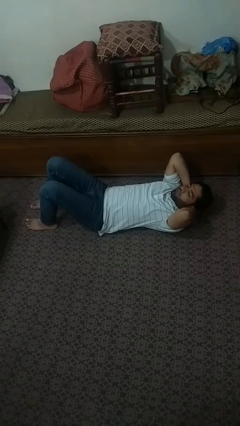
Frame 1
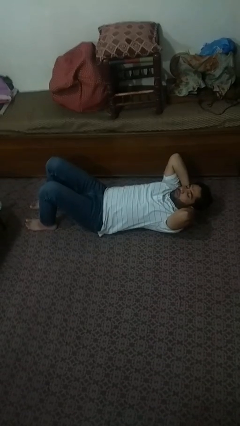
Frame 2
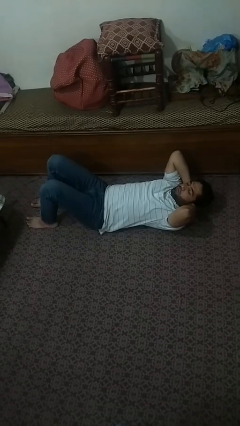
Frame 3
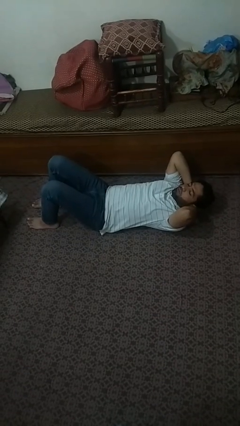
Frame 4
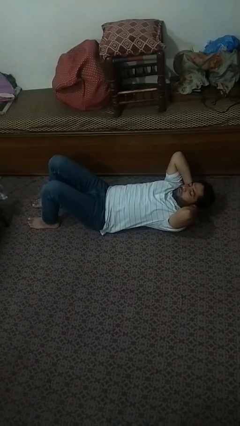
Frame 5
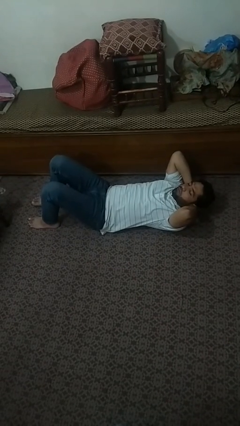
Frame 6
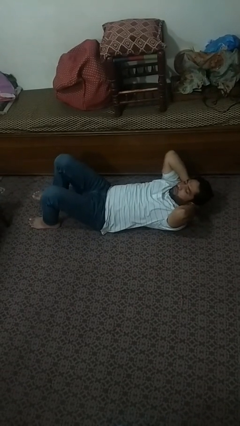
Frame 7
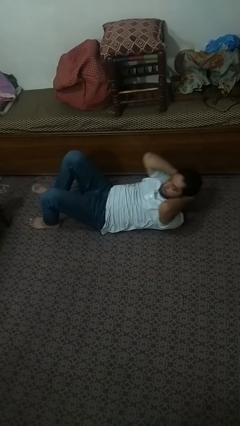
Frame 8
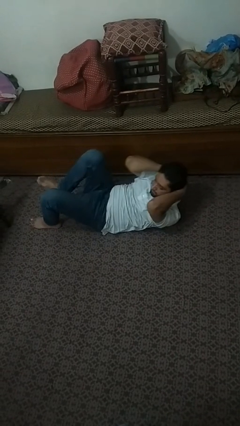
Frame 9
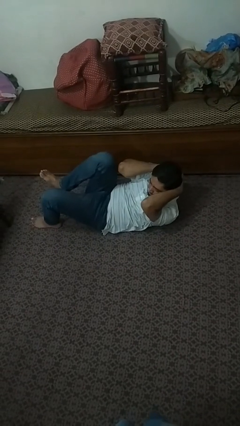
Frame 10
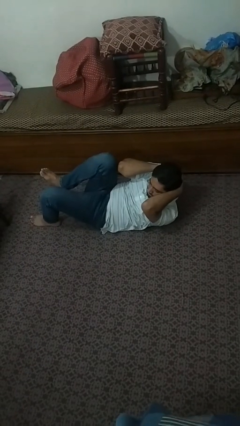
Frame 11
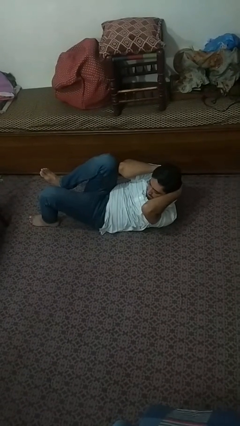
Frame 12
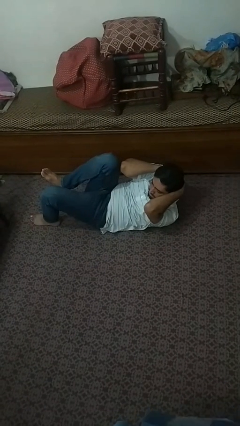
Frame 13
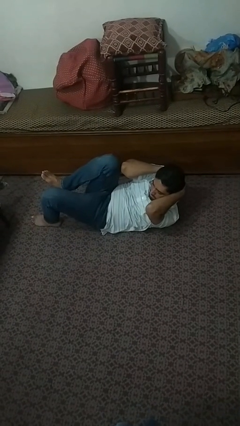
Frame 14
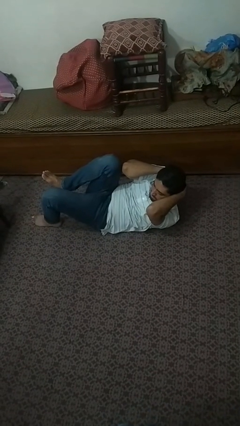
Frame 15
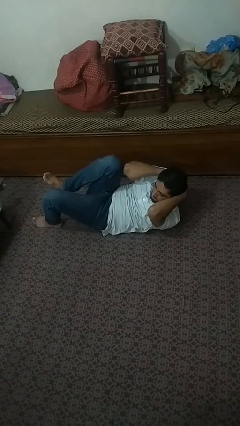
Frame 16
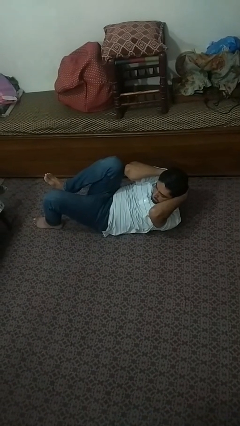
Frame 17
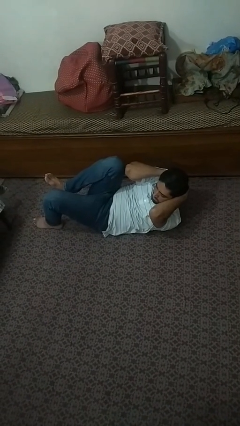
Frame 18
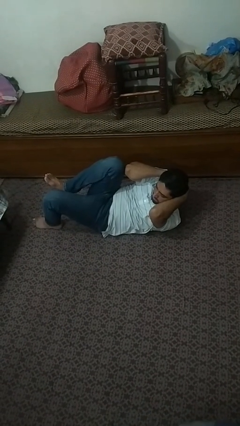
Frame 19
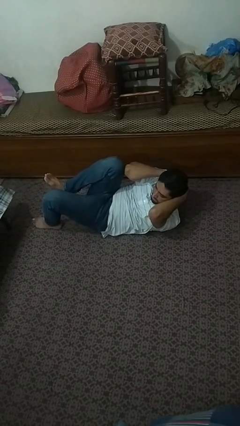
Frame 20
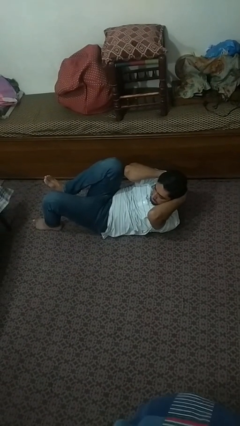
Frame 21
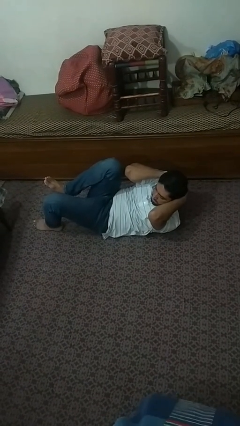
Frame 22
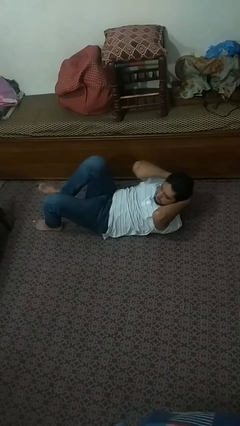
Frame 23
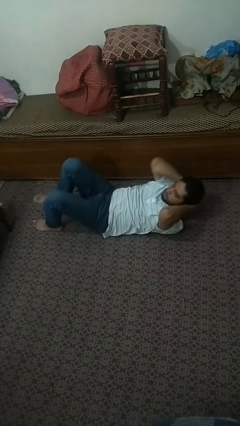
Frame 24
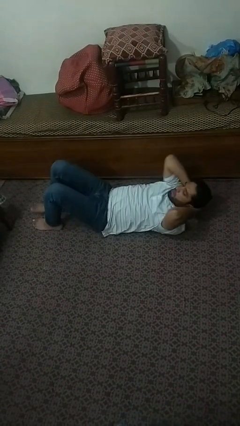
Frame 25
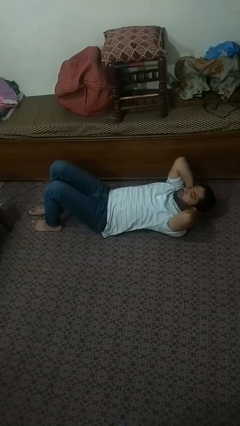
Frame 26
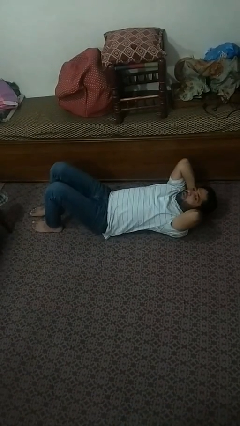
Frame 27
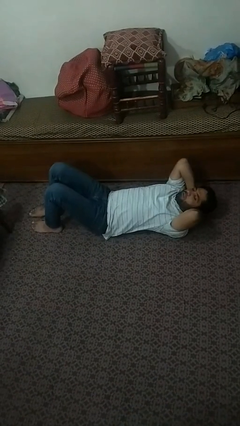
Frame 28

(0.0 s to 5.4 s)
person exercises with situp

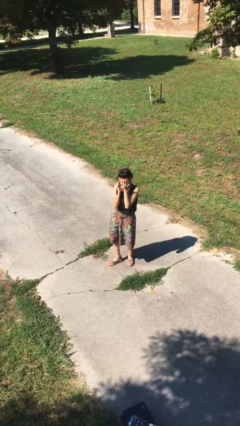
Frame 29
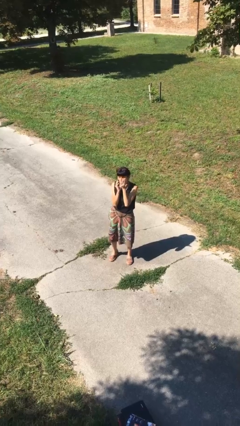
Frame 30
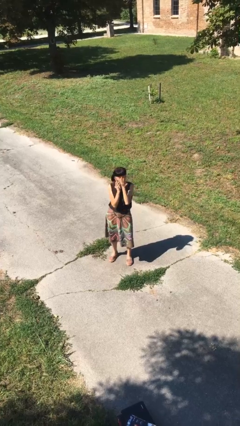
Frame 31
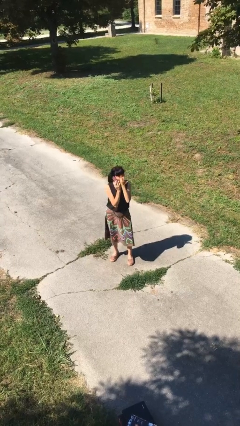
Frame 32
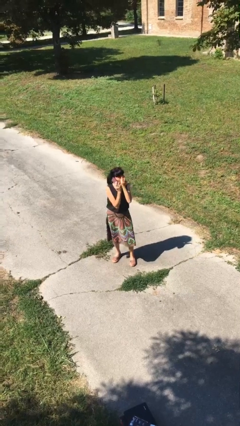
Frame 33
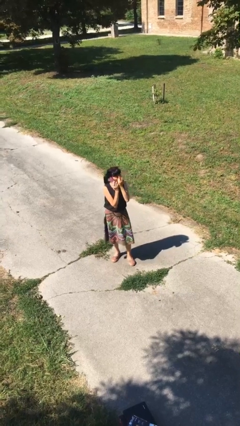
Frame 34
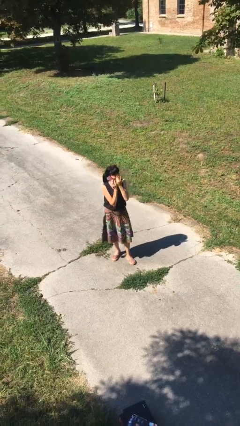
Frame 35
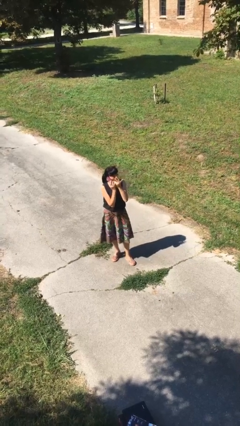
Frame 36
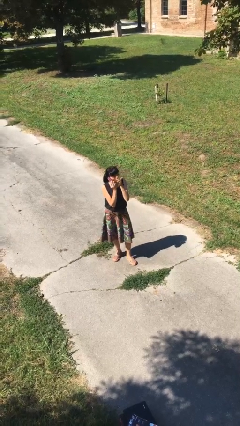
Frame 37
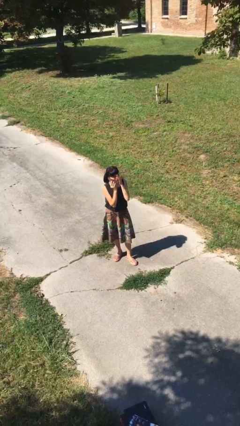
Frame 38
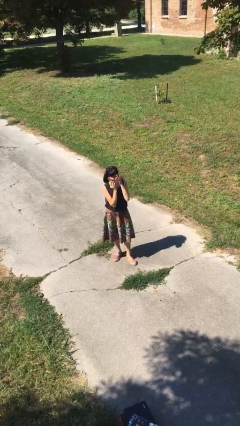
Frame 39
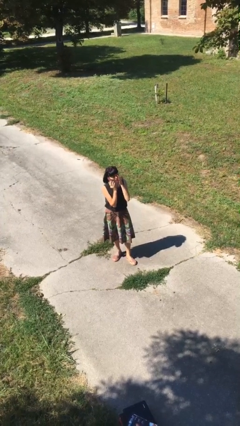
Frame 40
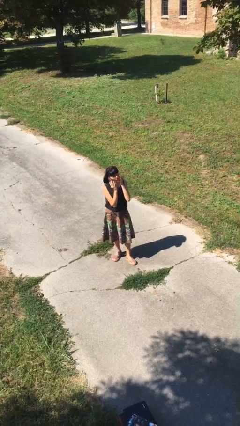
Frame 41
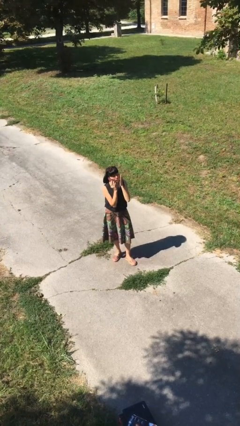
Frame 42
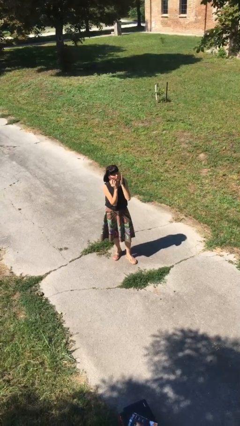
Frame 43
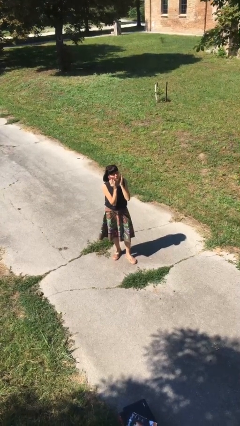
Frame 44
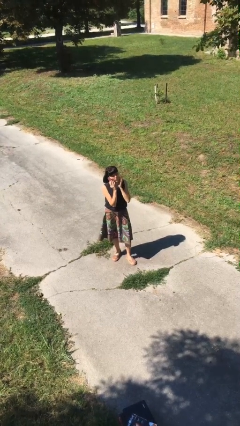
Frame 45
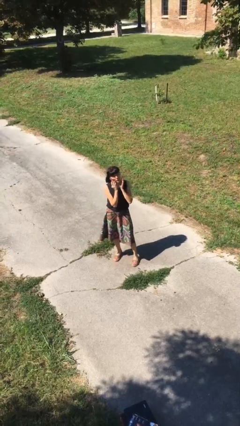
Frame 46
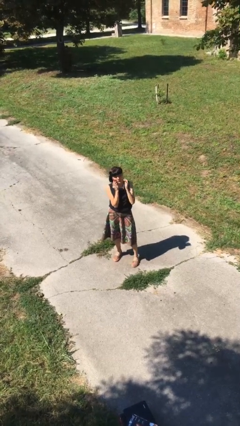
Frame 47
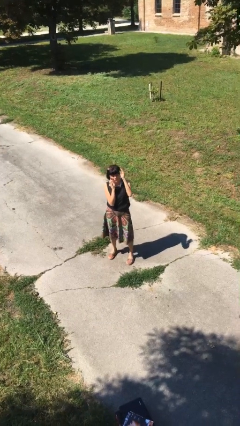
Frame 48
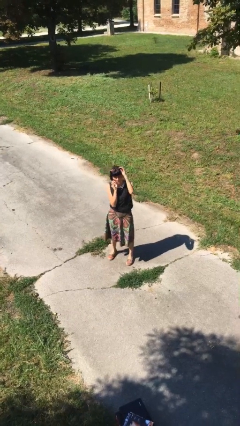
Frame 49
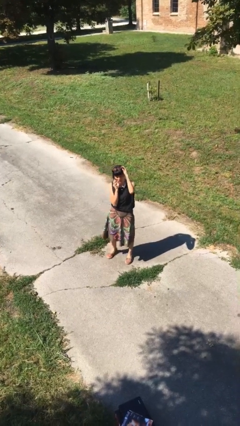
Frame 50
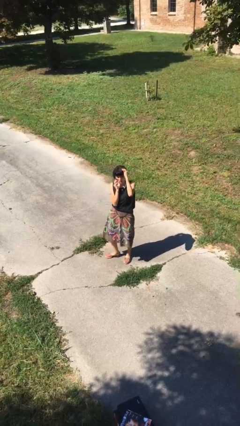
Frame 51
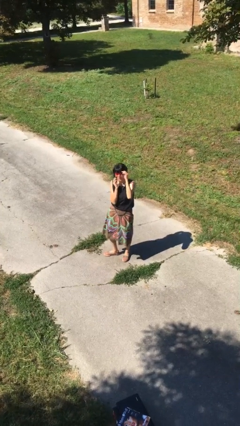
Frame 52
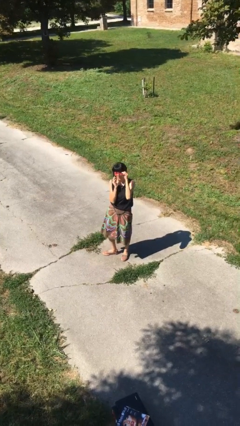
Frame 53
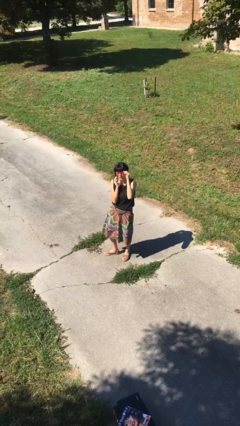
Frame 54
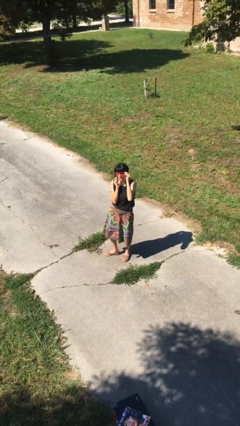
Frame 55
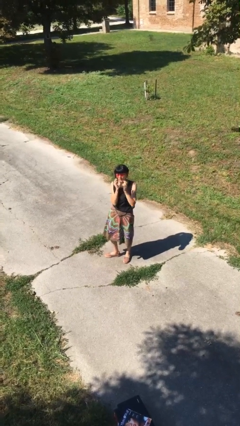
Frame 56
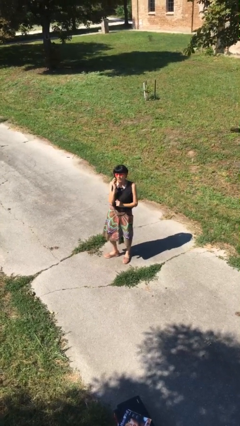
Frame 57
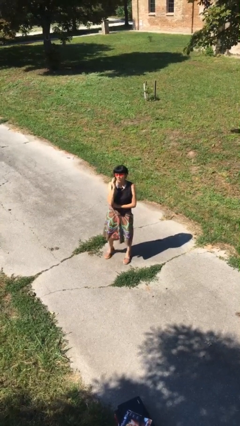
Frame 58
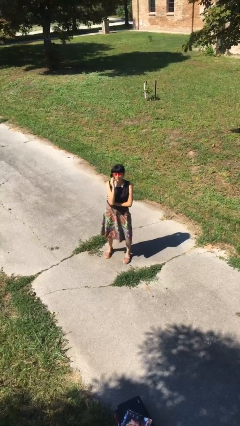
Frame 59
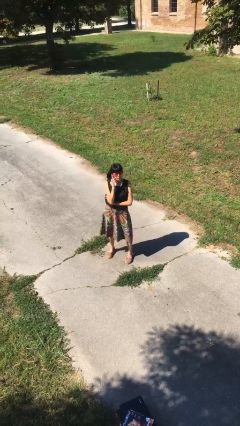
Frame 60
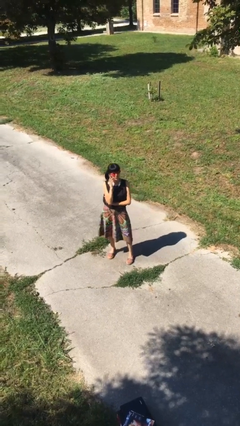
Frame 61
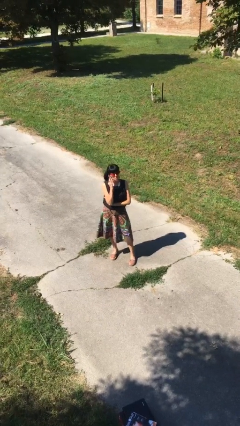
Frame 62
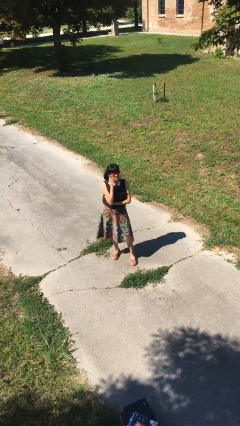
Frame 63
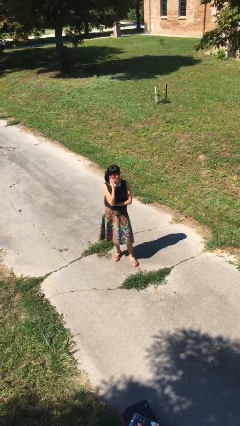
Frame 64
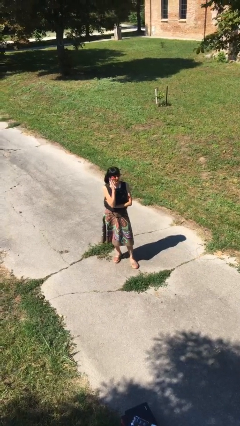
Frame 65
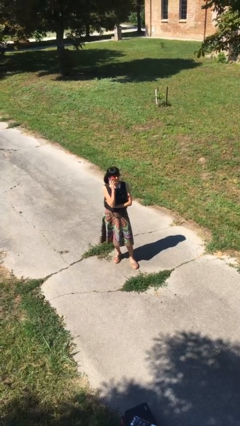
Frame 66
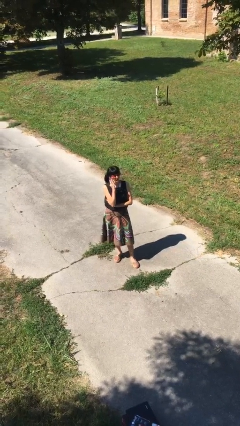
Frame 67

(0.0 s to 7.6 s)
person talks on phone

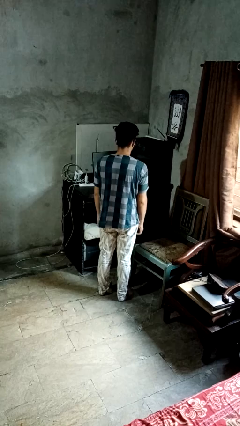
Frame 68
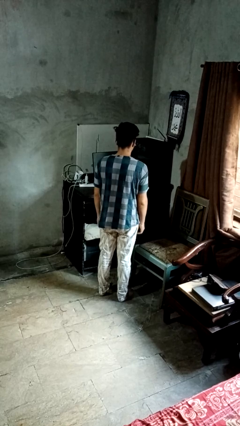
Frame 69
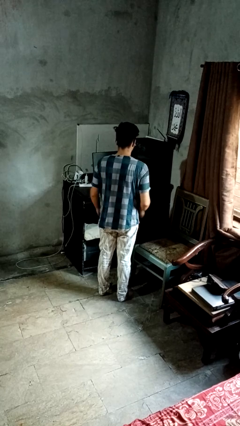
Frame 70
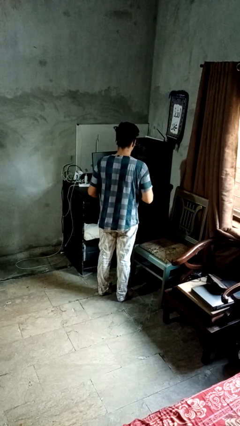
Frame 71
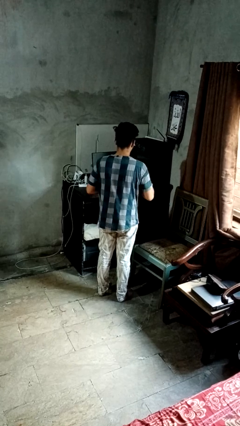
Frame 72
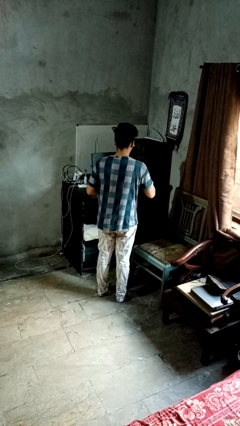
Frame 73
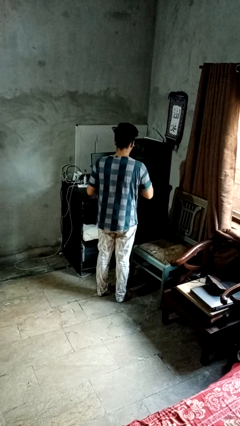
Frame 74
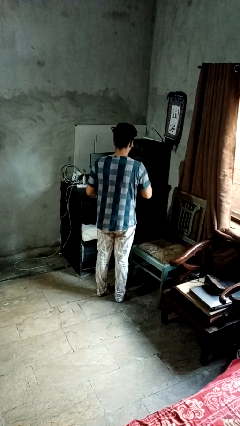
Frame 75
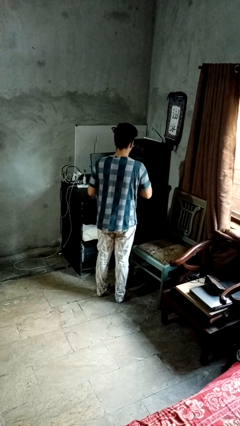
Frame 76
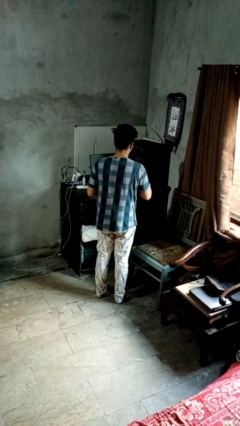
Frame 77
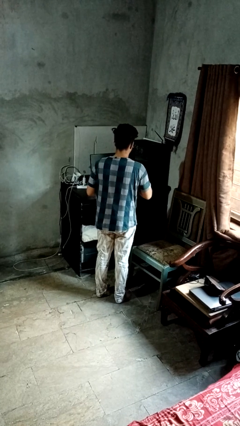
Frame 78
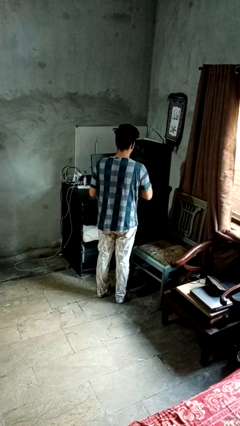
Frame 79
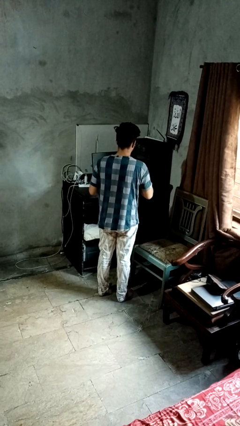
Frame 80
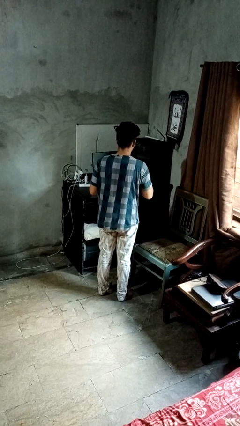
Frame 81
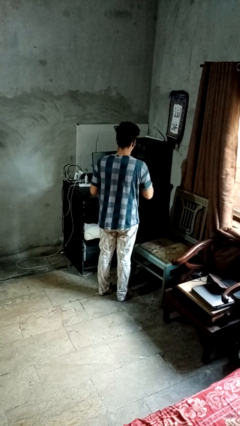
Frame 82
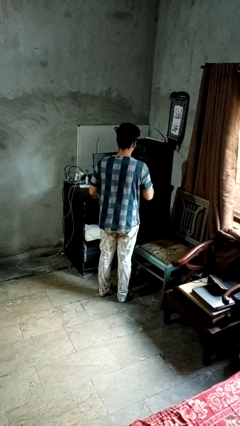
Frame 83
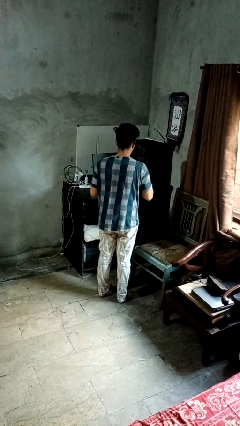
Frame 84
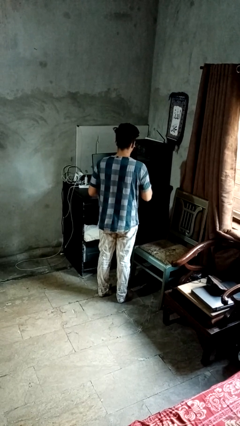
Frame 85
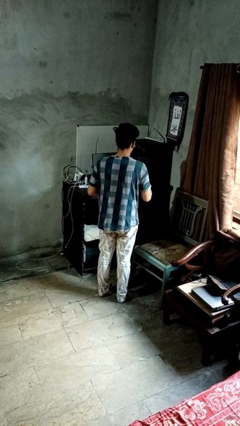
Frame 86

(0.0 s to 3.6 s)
person drums on chest

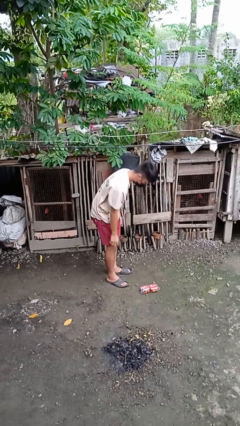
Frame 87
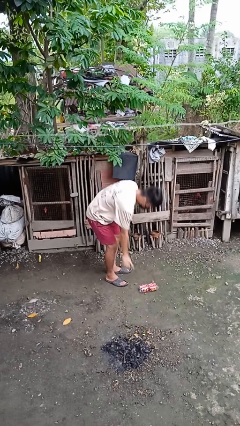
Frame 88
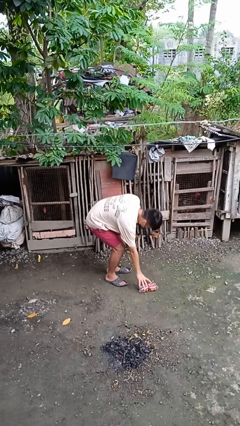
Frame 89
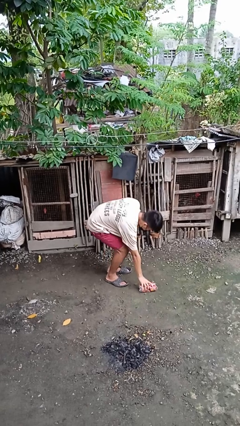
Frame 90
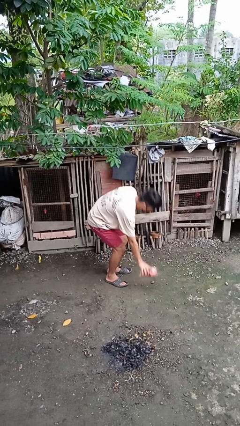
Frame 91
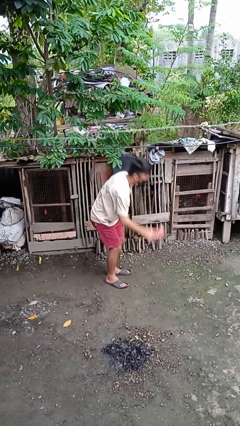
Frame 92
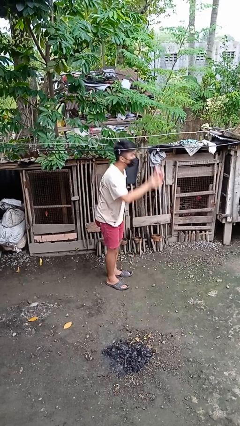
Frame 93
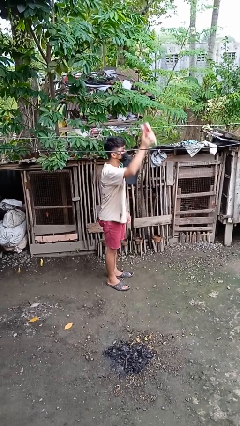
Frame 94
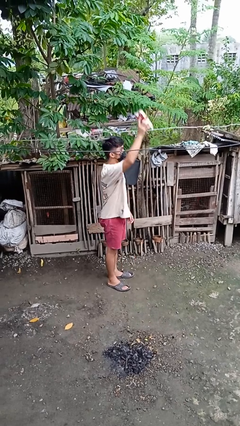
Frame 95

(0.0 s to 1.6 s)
person picks up object from floor
